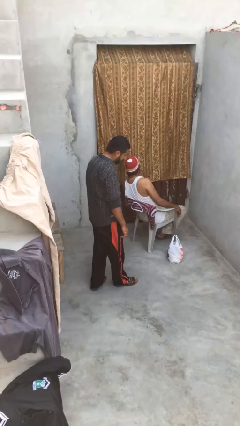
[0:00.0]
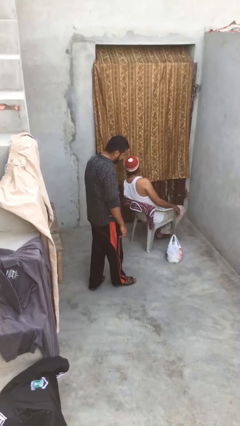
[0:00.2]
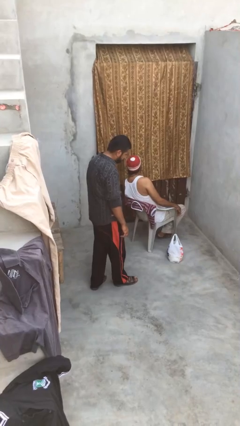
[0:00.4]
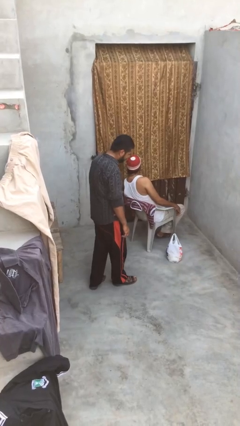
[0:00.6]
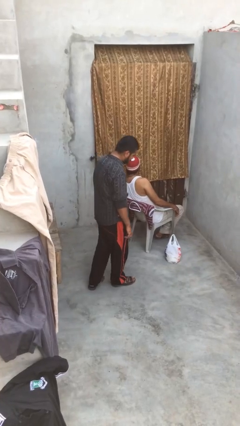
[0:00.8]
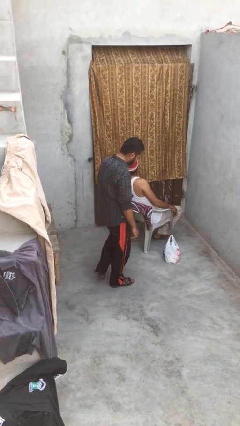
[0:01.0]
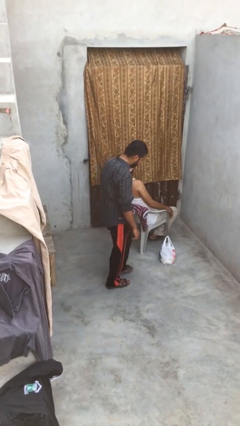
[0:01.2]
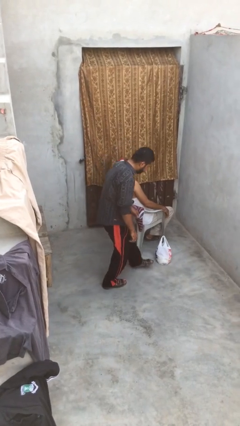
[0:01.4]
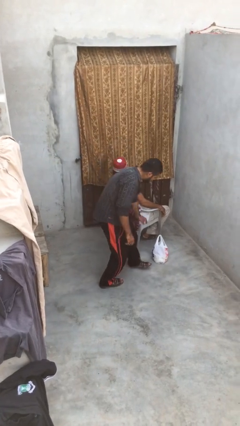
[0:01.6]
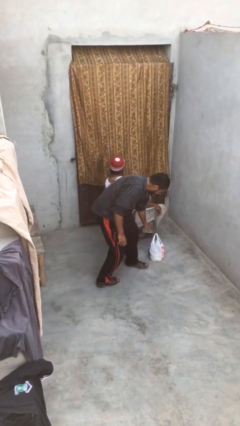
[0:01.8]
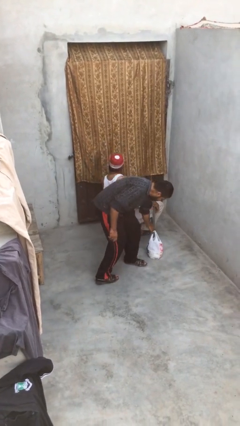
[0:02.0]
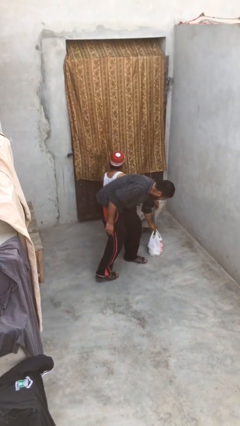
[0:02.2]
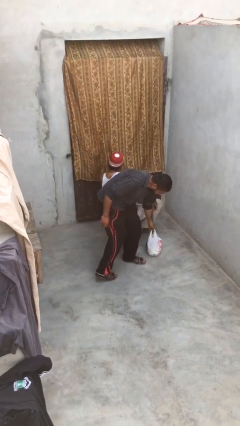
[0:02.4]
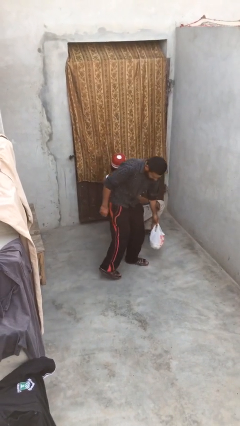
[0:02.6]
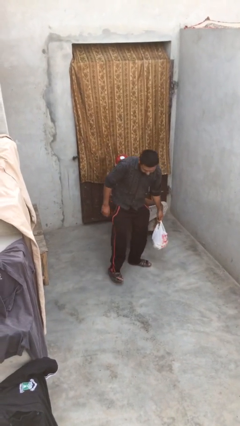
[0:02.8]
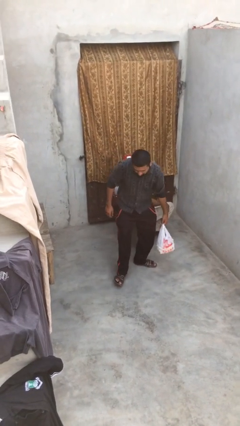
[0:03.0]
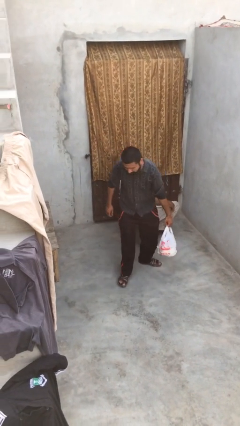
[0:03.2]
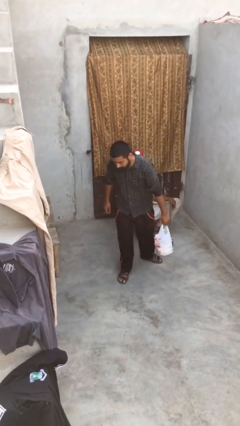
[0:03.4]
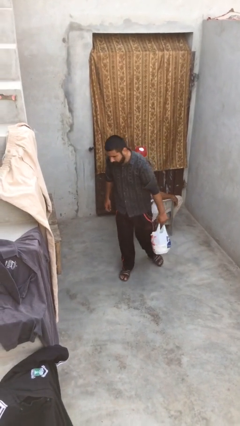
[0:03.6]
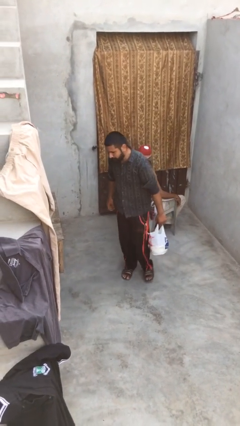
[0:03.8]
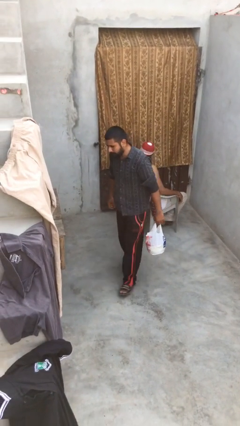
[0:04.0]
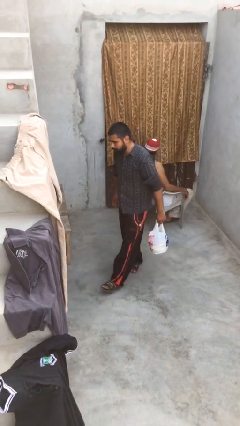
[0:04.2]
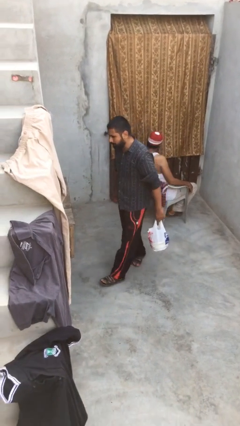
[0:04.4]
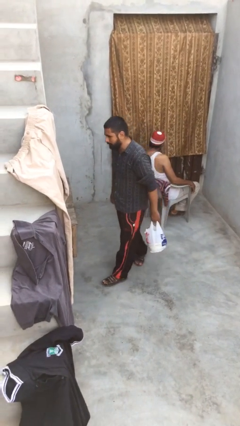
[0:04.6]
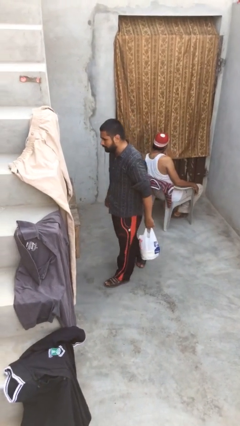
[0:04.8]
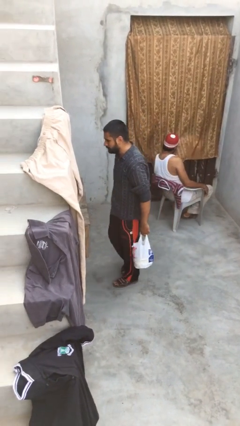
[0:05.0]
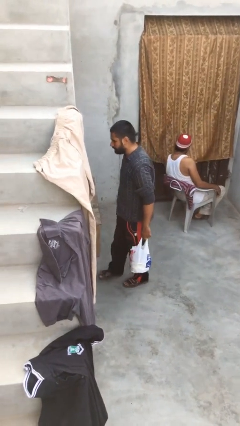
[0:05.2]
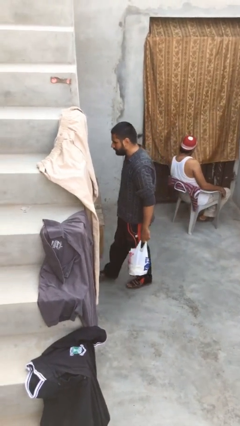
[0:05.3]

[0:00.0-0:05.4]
person steals object from person

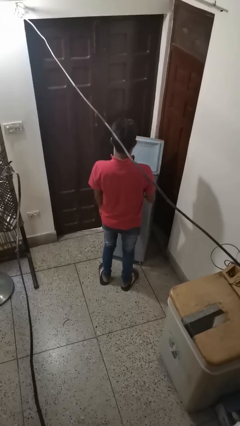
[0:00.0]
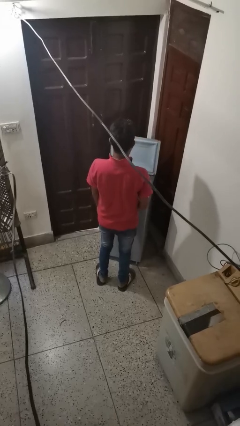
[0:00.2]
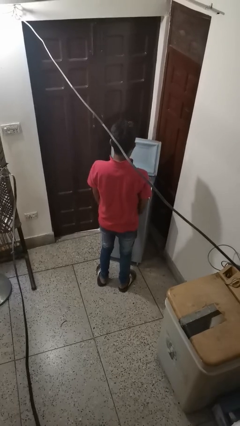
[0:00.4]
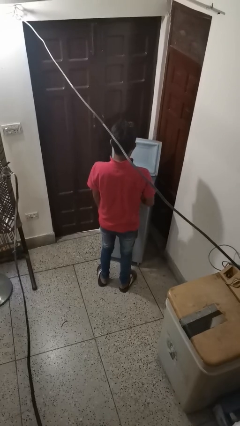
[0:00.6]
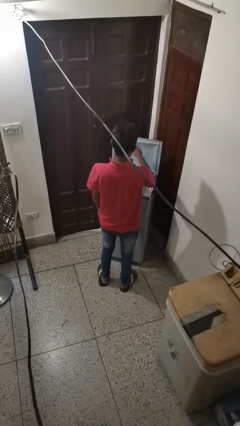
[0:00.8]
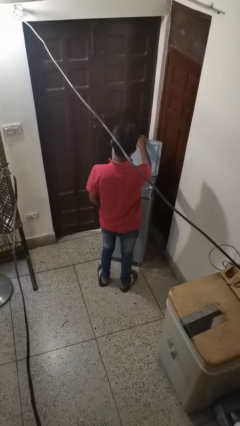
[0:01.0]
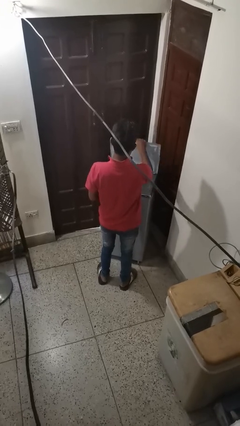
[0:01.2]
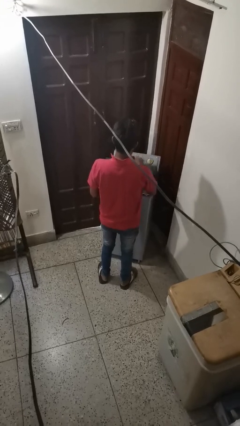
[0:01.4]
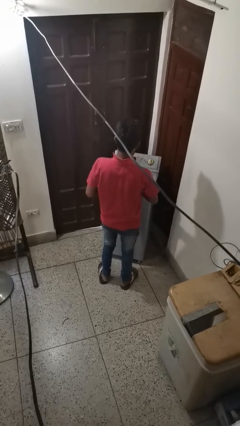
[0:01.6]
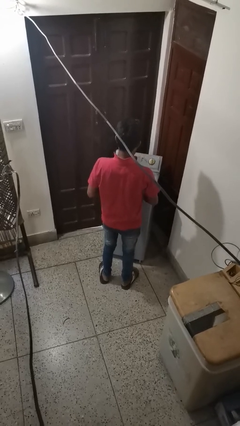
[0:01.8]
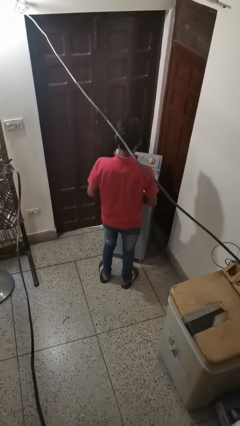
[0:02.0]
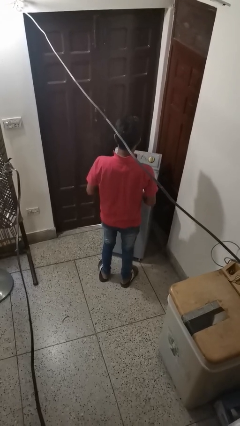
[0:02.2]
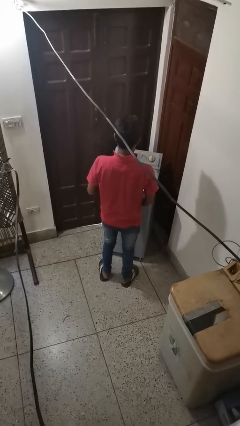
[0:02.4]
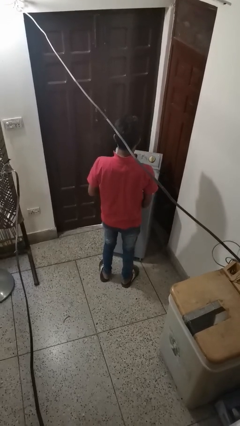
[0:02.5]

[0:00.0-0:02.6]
person closes clothes washer

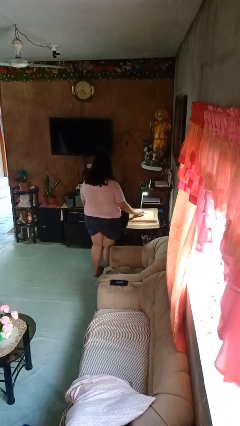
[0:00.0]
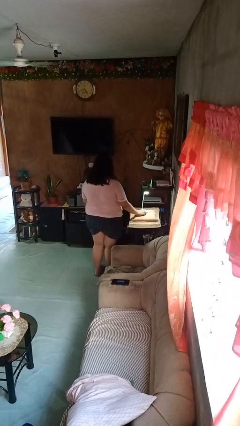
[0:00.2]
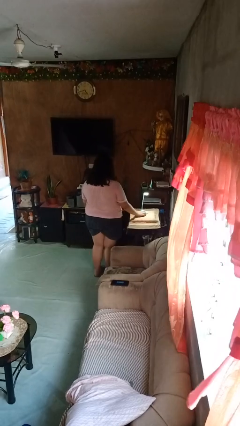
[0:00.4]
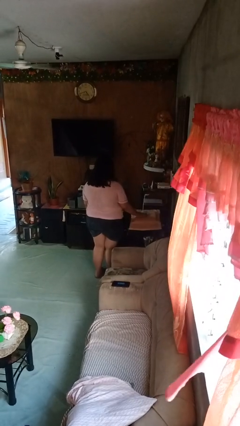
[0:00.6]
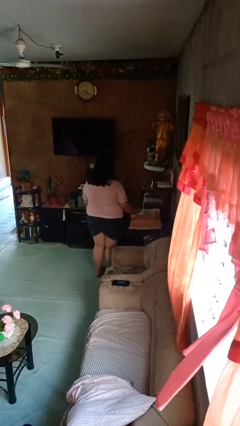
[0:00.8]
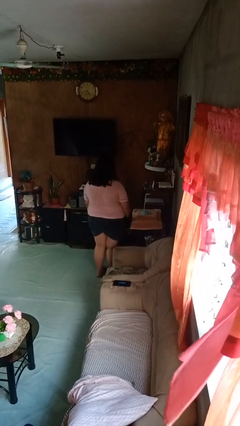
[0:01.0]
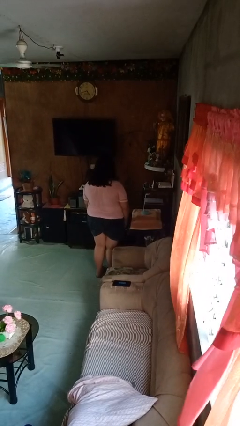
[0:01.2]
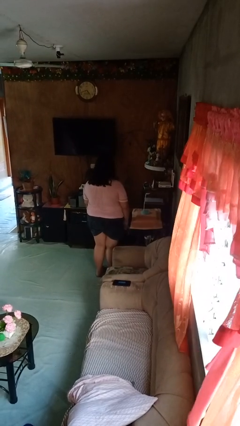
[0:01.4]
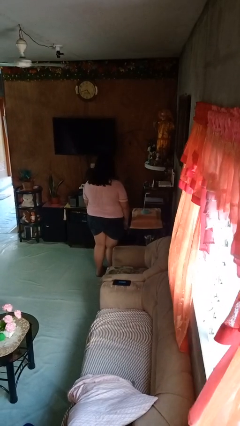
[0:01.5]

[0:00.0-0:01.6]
person turns off lamp

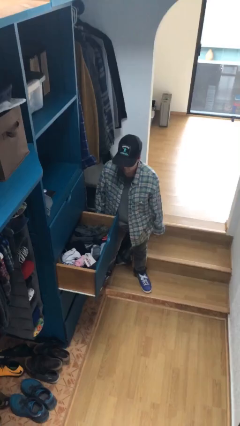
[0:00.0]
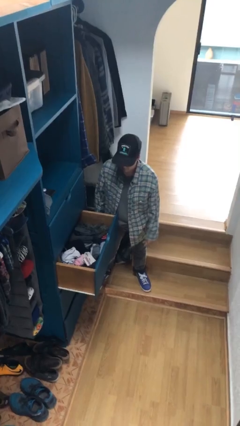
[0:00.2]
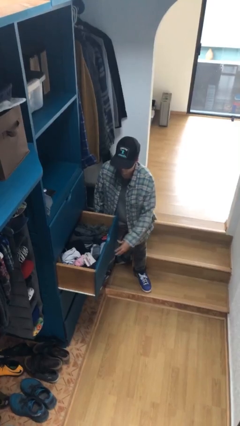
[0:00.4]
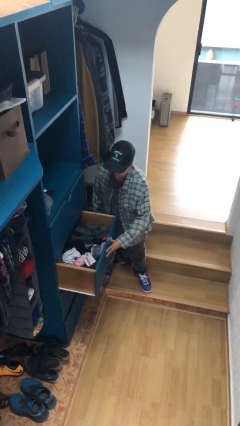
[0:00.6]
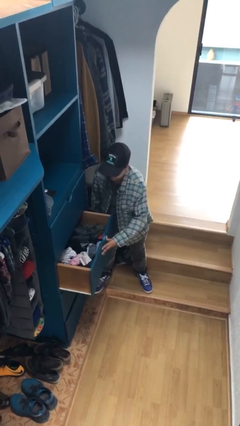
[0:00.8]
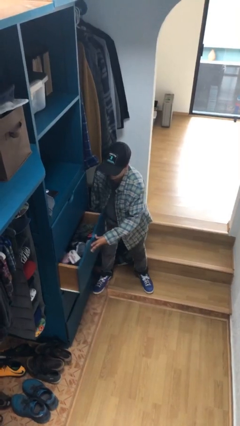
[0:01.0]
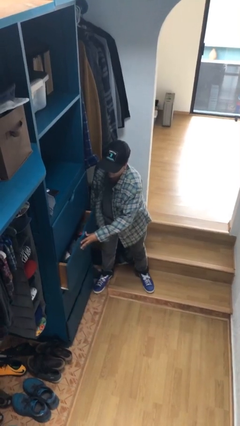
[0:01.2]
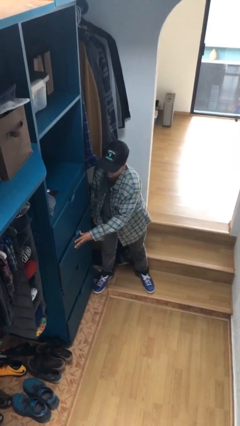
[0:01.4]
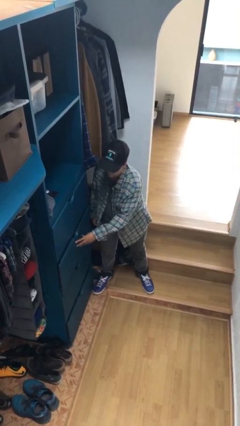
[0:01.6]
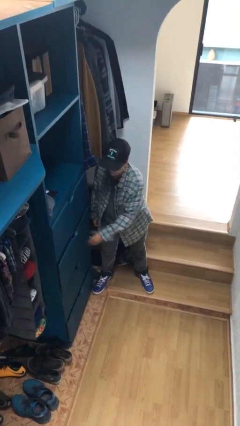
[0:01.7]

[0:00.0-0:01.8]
person closes dresser drawer

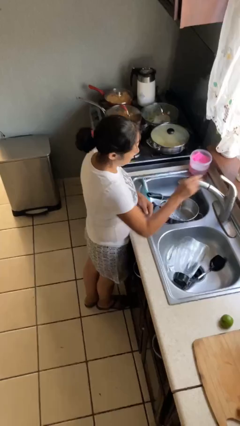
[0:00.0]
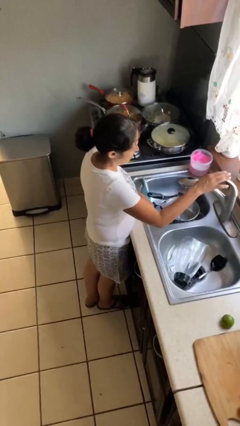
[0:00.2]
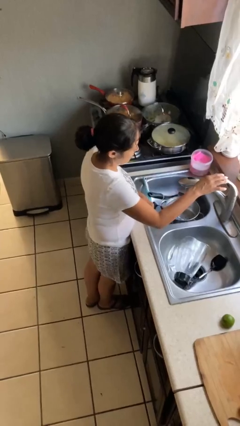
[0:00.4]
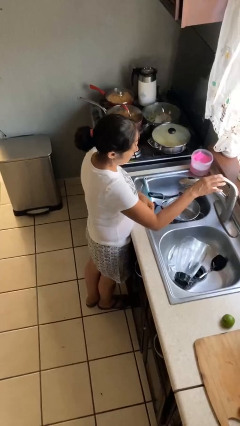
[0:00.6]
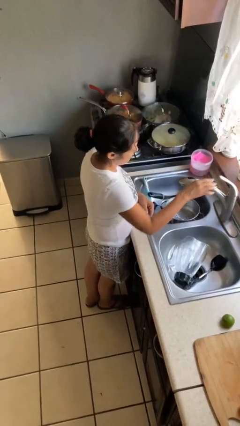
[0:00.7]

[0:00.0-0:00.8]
person turns off faucet

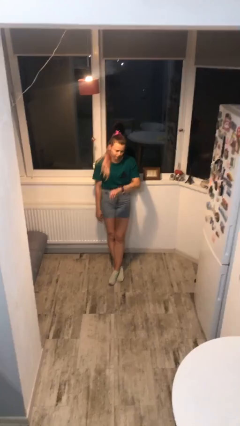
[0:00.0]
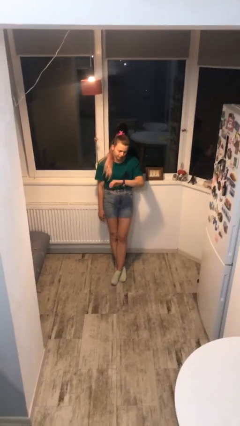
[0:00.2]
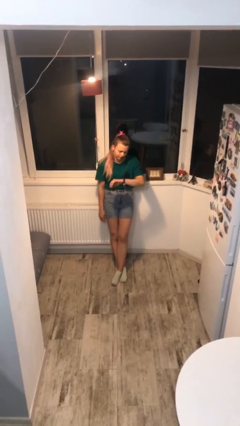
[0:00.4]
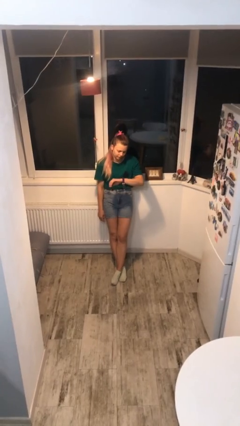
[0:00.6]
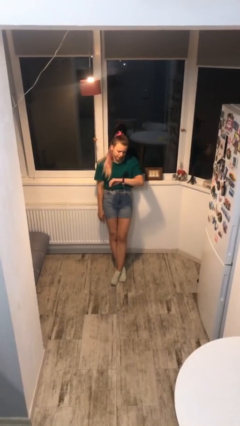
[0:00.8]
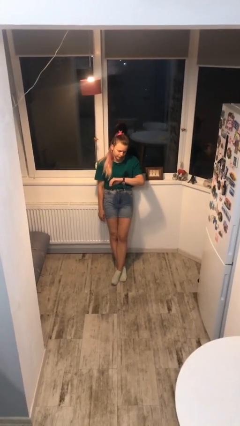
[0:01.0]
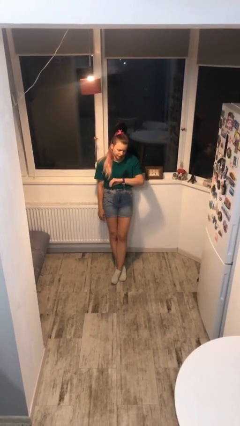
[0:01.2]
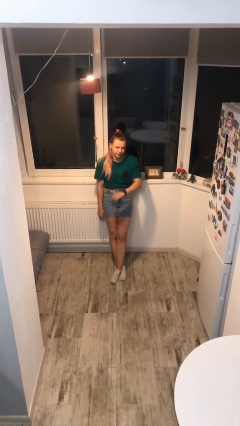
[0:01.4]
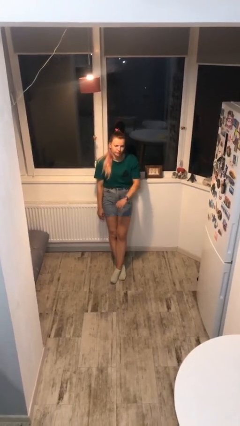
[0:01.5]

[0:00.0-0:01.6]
person looks at wristwatch

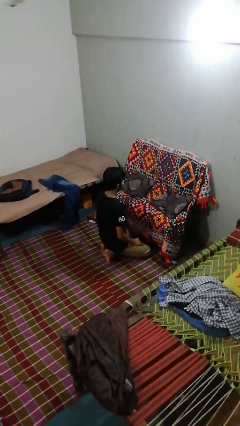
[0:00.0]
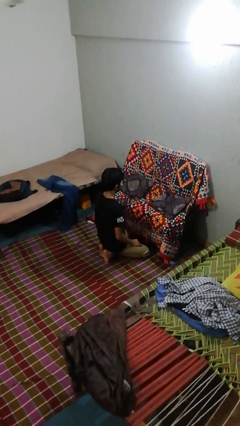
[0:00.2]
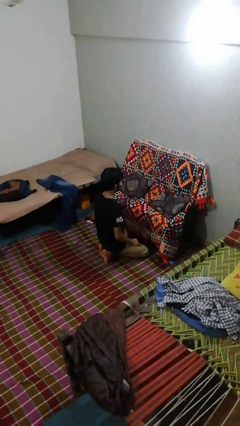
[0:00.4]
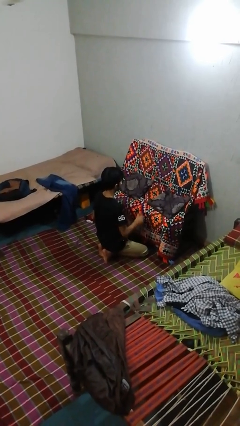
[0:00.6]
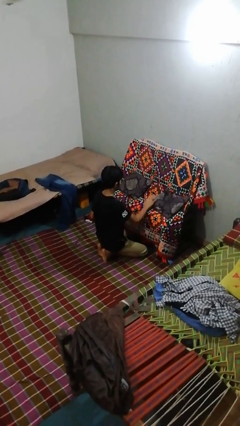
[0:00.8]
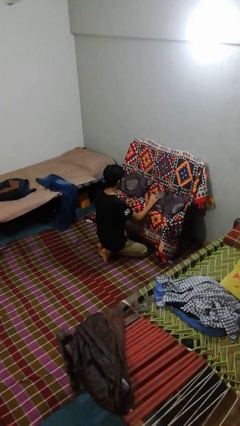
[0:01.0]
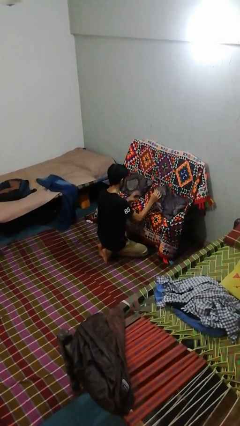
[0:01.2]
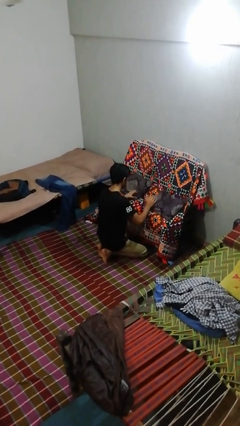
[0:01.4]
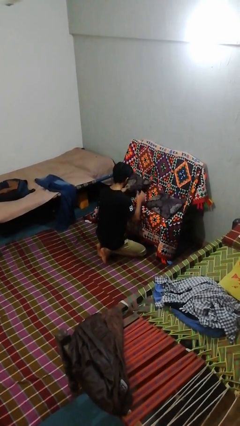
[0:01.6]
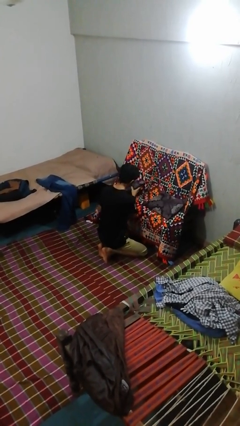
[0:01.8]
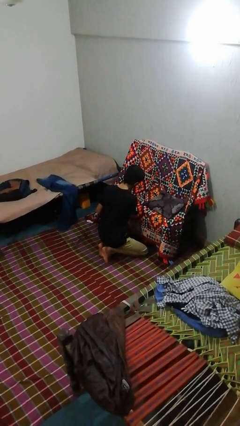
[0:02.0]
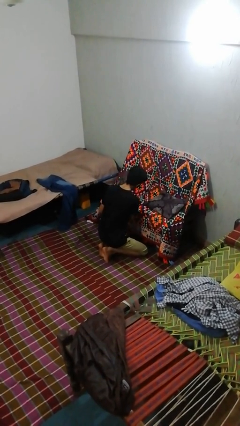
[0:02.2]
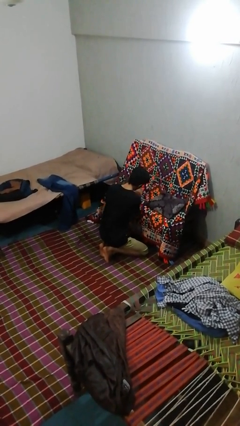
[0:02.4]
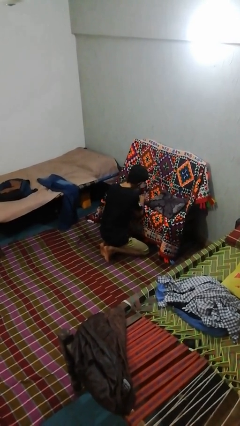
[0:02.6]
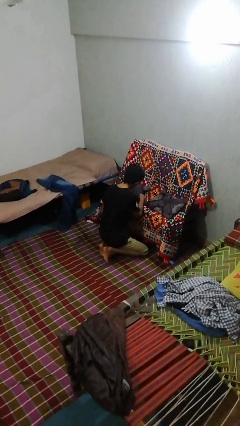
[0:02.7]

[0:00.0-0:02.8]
person searches in couch

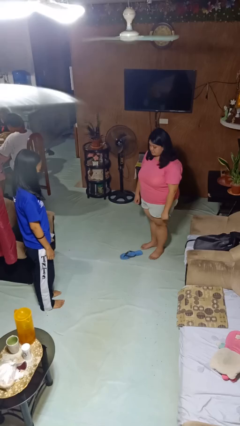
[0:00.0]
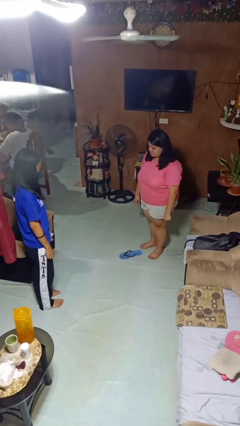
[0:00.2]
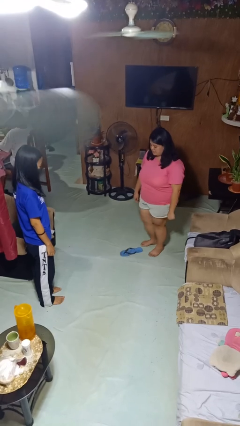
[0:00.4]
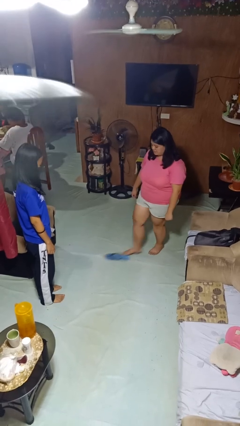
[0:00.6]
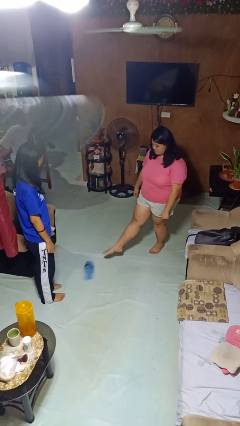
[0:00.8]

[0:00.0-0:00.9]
person kicks object to person
